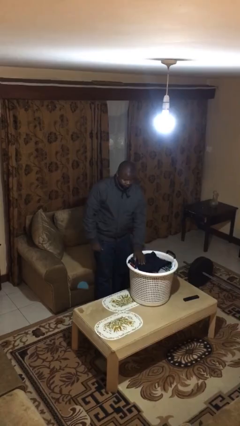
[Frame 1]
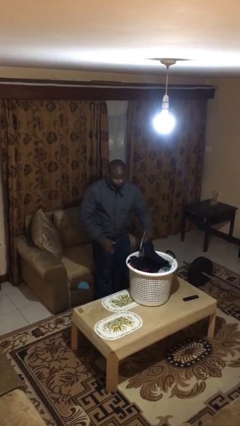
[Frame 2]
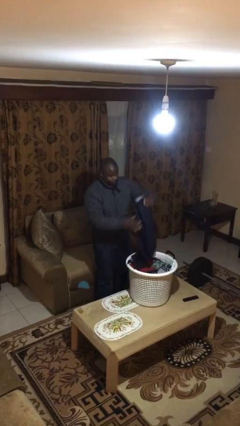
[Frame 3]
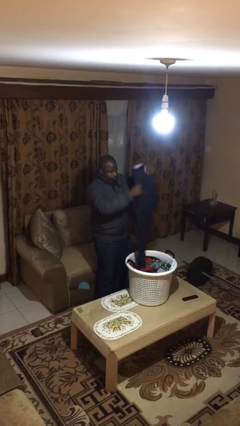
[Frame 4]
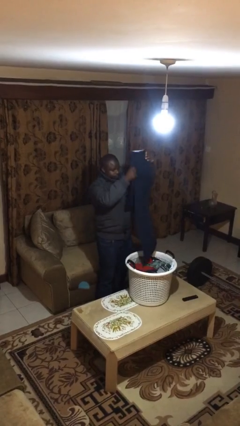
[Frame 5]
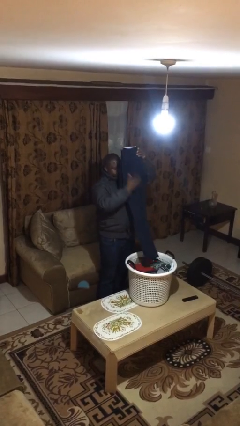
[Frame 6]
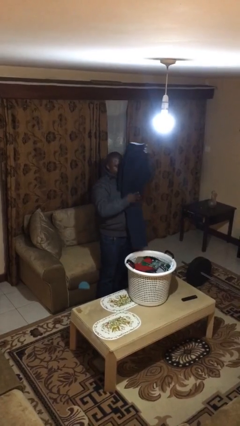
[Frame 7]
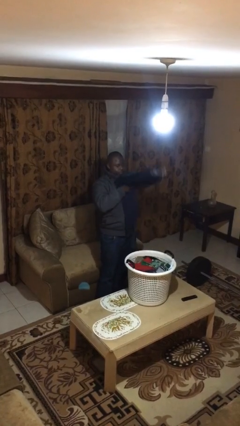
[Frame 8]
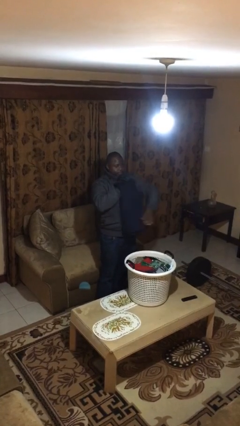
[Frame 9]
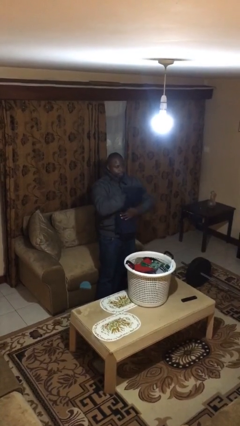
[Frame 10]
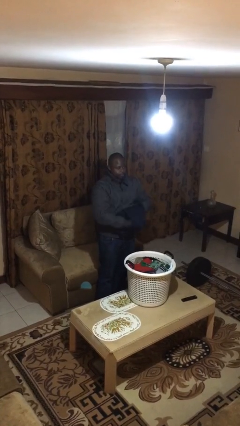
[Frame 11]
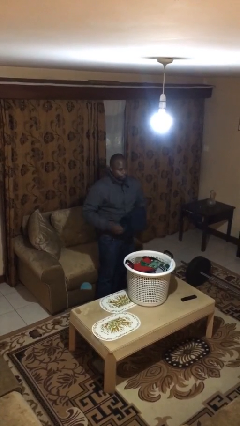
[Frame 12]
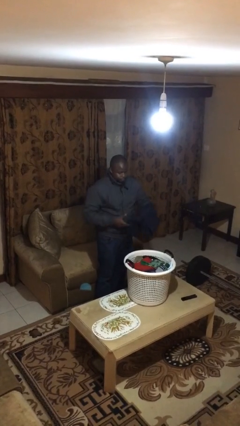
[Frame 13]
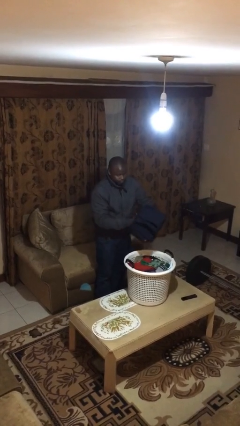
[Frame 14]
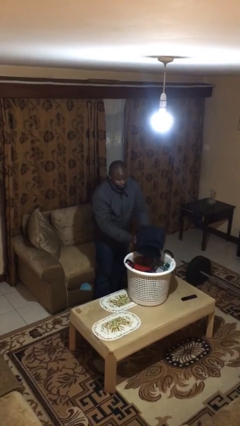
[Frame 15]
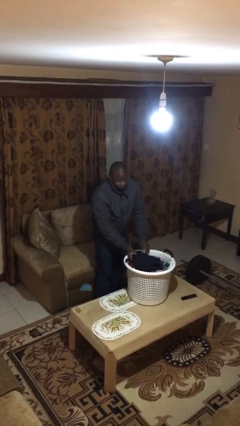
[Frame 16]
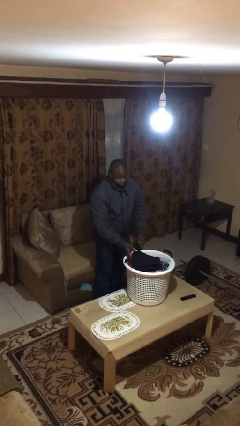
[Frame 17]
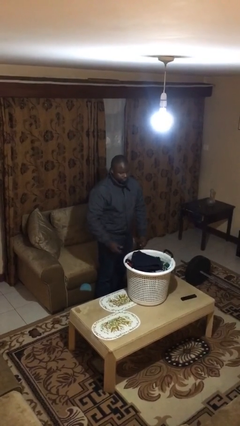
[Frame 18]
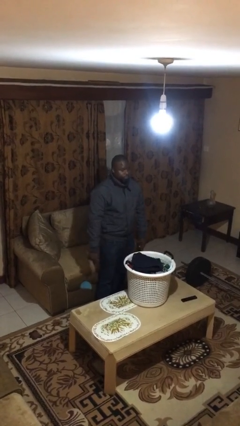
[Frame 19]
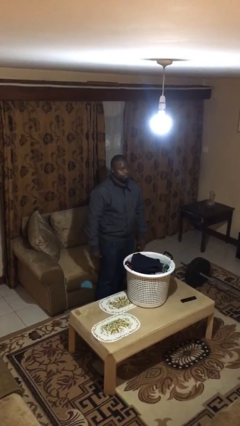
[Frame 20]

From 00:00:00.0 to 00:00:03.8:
person folds pants

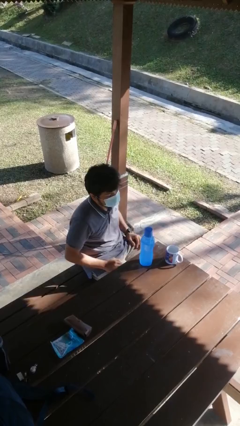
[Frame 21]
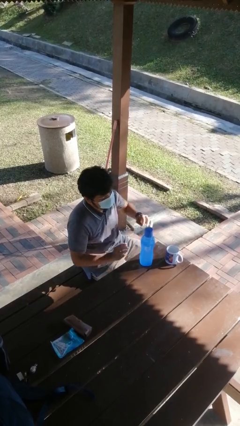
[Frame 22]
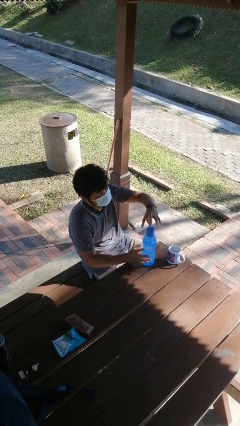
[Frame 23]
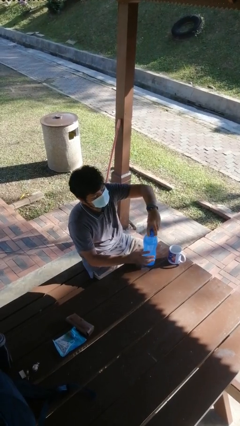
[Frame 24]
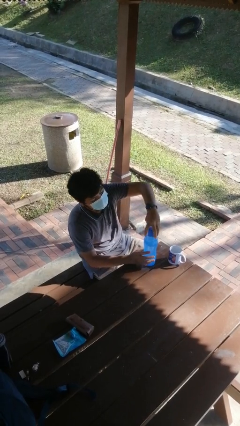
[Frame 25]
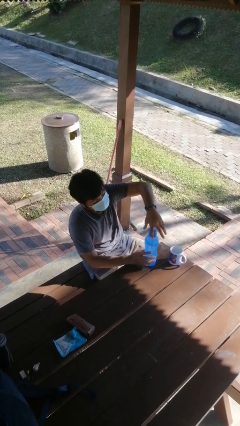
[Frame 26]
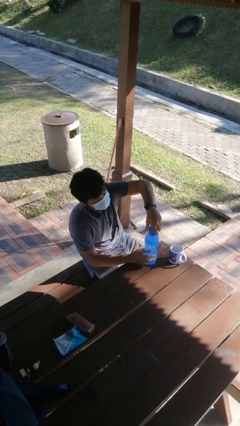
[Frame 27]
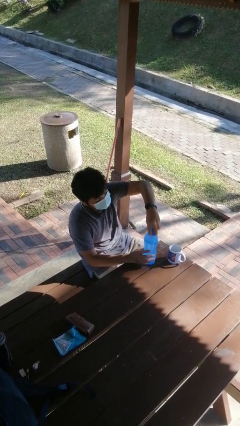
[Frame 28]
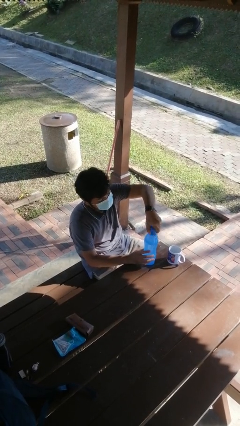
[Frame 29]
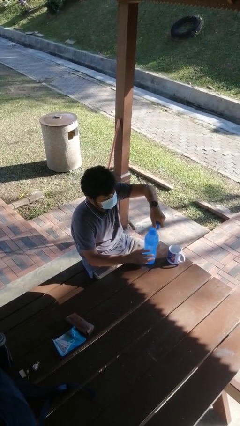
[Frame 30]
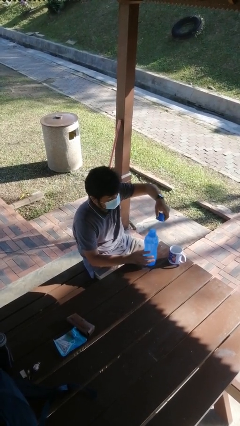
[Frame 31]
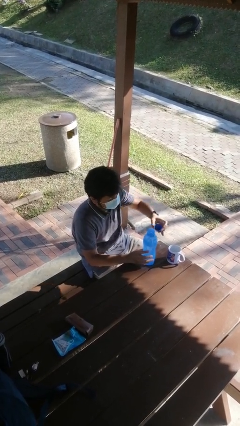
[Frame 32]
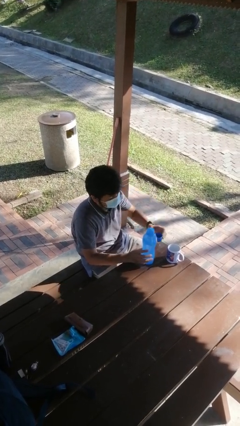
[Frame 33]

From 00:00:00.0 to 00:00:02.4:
person unscrews lid from bottle

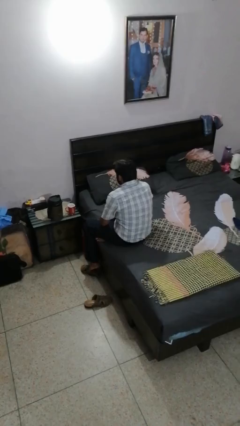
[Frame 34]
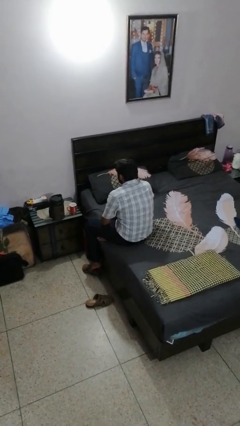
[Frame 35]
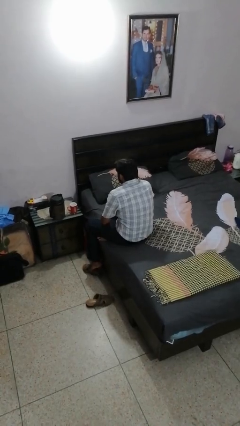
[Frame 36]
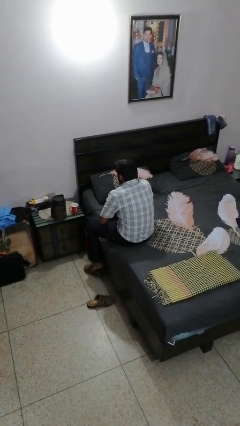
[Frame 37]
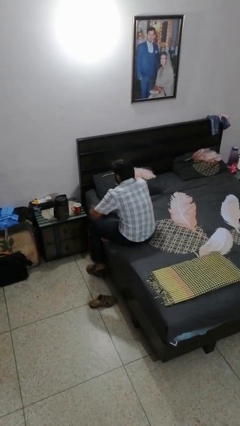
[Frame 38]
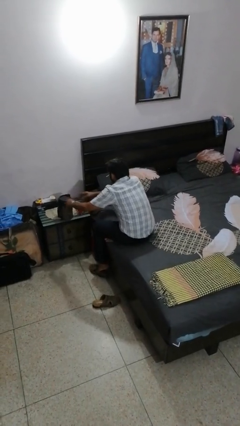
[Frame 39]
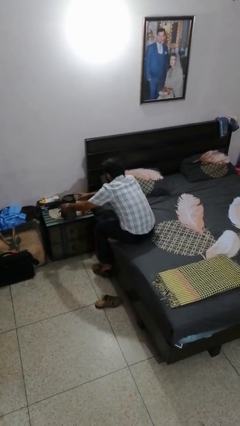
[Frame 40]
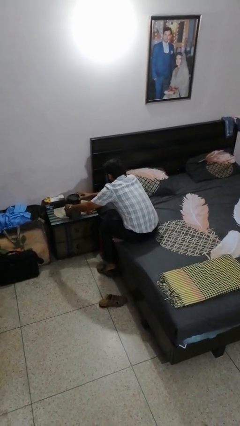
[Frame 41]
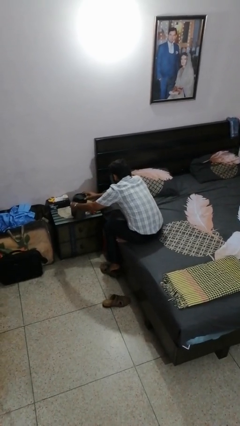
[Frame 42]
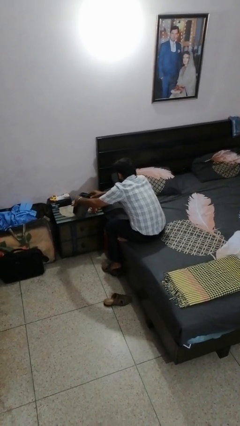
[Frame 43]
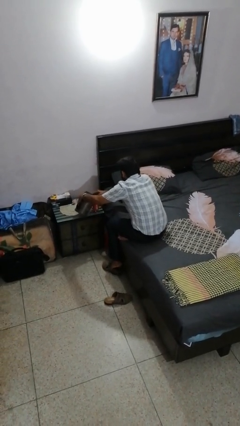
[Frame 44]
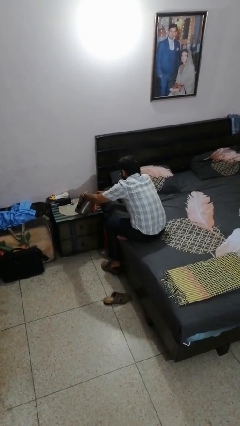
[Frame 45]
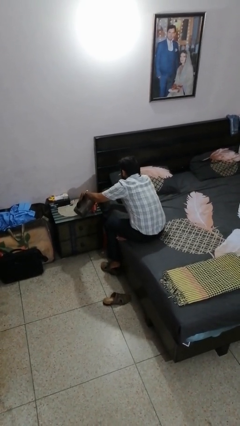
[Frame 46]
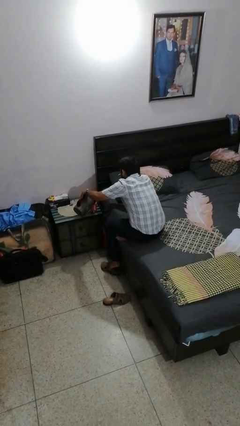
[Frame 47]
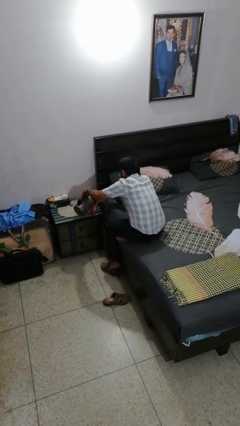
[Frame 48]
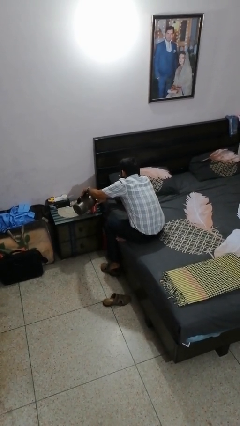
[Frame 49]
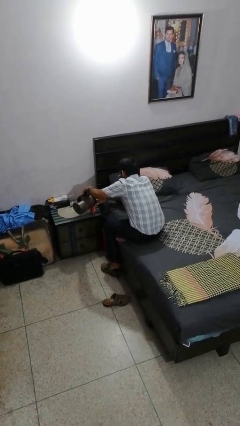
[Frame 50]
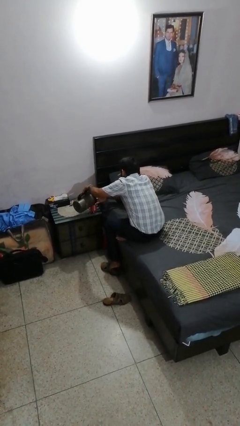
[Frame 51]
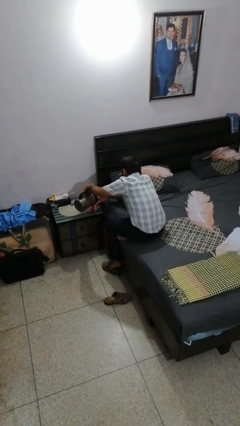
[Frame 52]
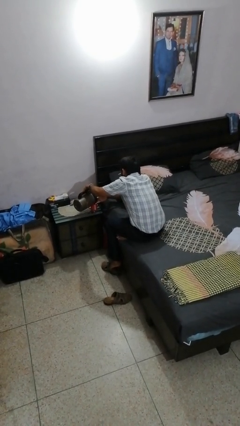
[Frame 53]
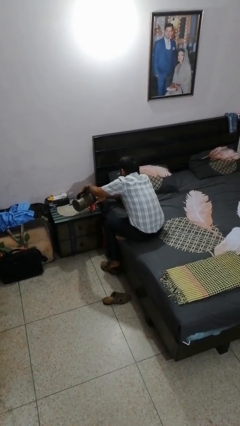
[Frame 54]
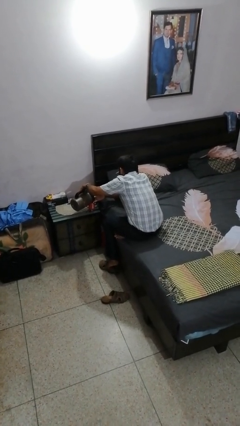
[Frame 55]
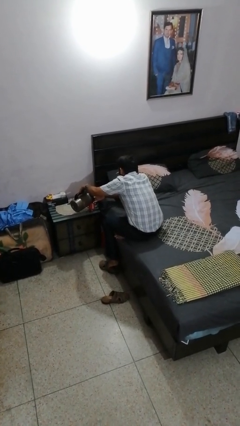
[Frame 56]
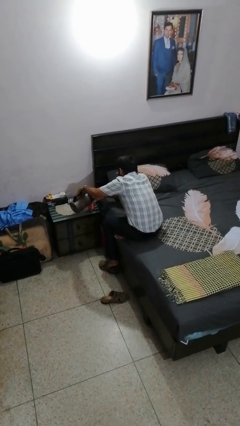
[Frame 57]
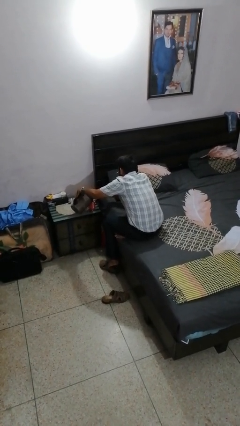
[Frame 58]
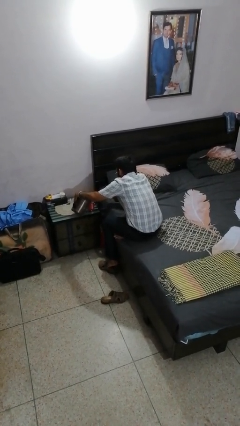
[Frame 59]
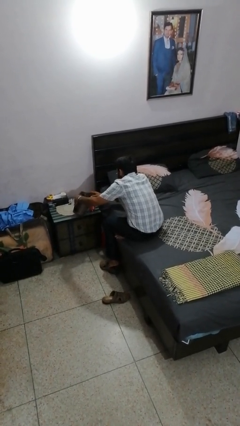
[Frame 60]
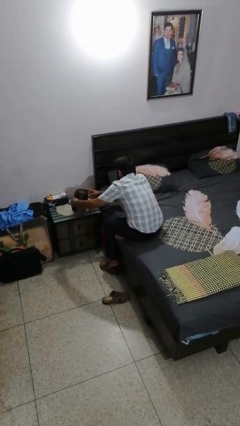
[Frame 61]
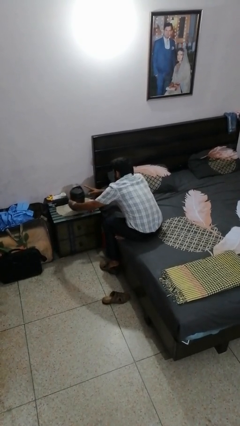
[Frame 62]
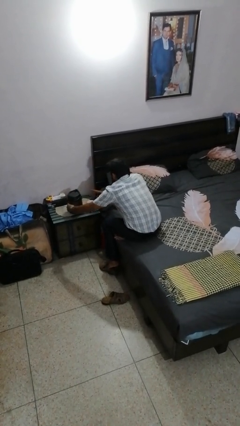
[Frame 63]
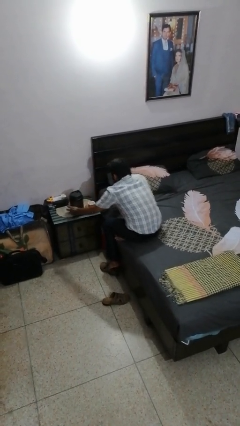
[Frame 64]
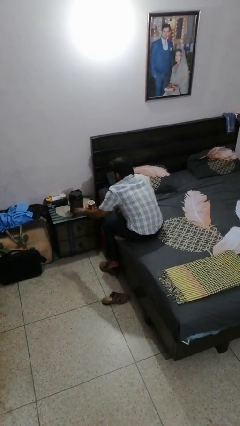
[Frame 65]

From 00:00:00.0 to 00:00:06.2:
person pours coffee into mug

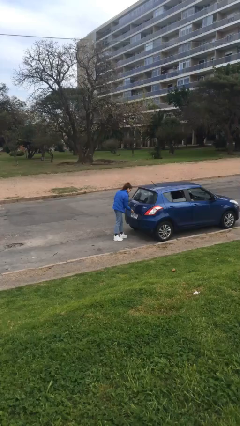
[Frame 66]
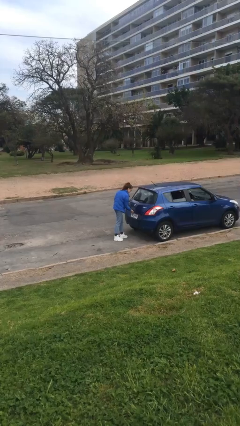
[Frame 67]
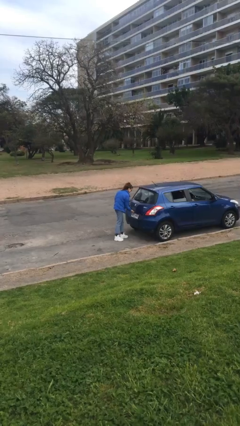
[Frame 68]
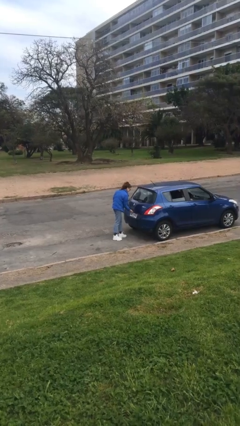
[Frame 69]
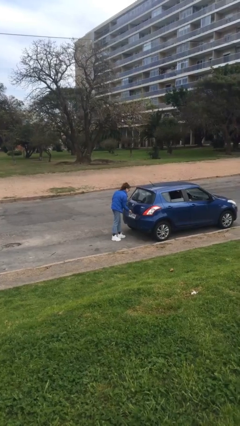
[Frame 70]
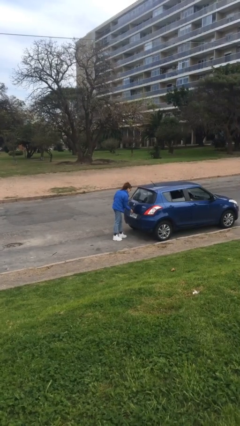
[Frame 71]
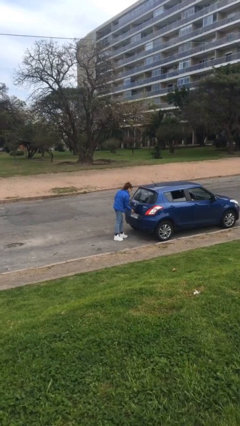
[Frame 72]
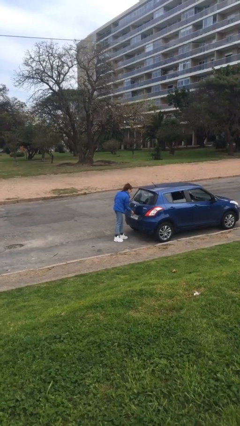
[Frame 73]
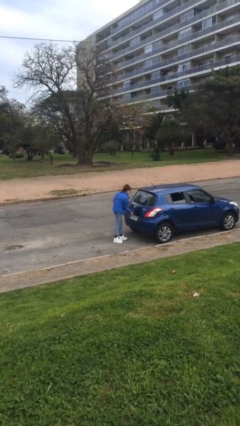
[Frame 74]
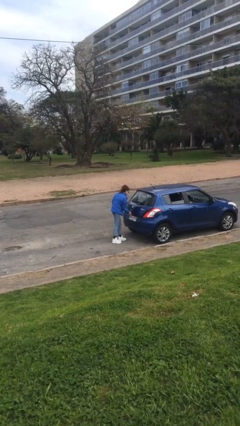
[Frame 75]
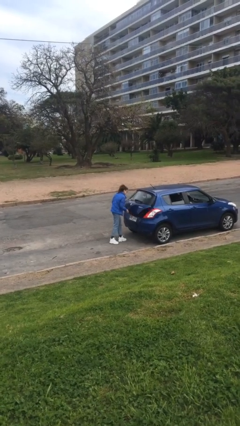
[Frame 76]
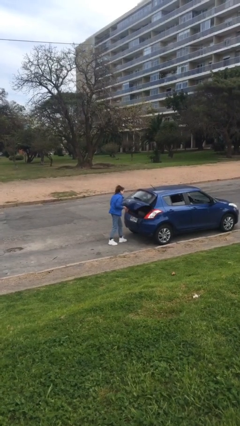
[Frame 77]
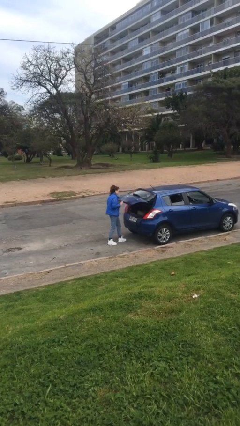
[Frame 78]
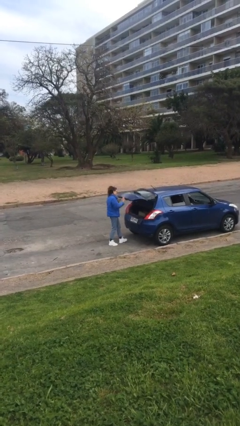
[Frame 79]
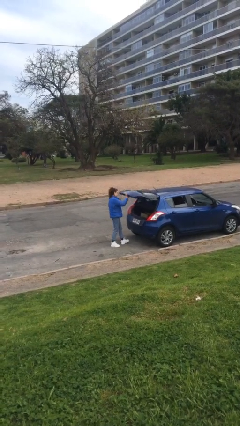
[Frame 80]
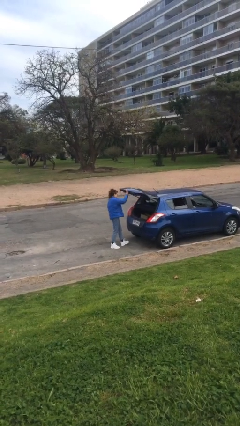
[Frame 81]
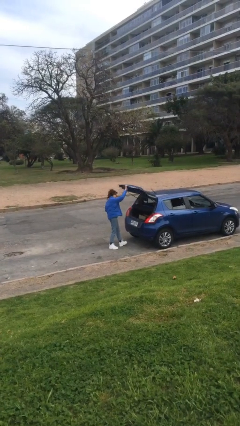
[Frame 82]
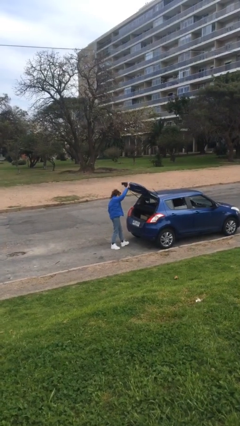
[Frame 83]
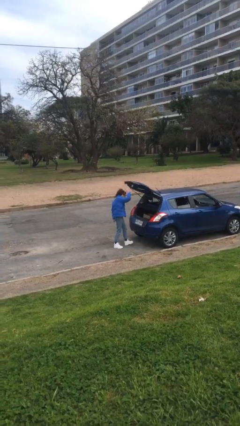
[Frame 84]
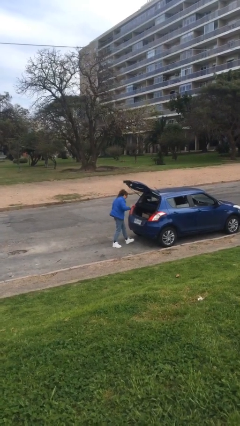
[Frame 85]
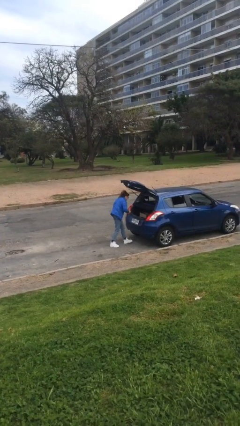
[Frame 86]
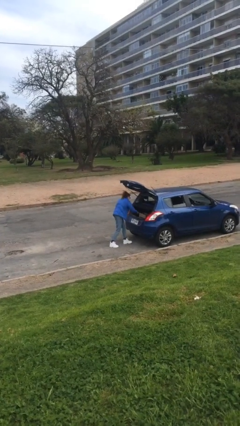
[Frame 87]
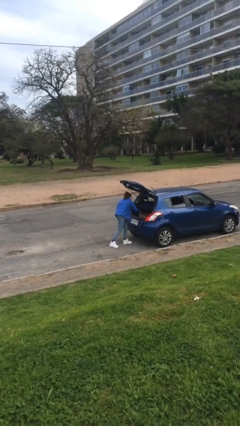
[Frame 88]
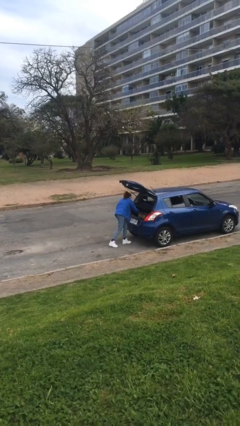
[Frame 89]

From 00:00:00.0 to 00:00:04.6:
person opens car door

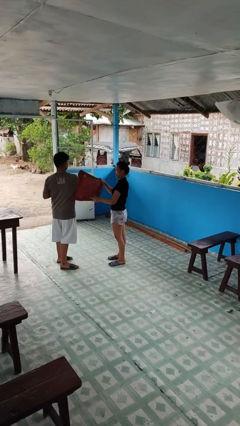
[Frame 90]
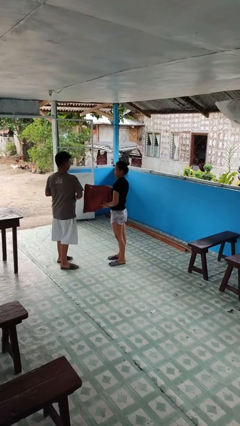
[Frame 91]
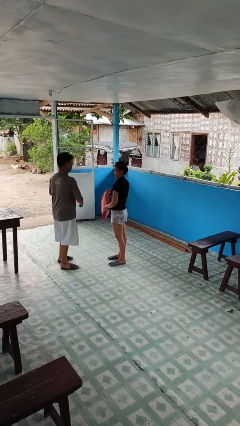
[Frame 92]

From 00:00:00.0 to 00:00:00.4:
person hits person with pillow

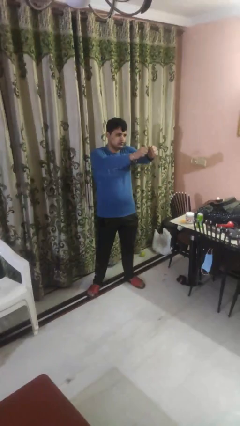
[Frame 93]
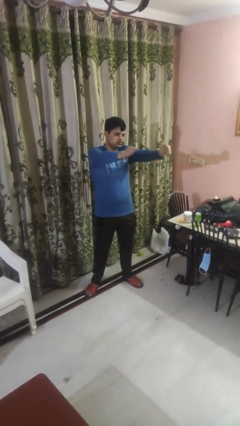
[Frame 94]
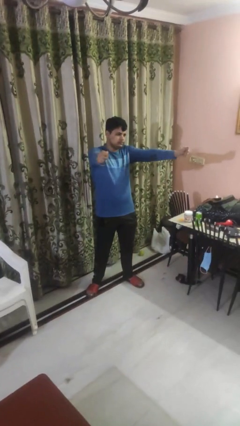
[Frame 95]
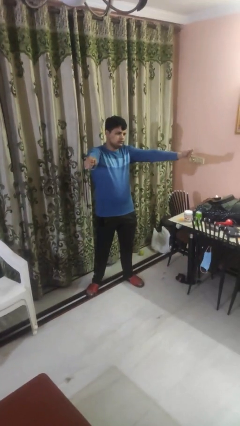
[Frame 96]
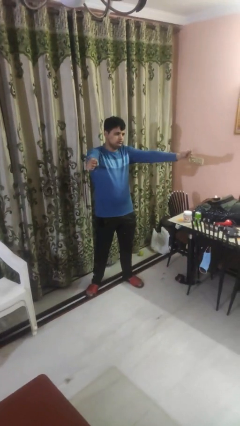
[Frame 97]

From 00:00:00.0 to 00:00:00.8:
person gestures zoom in
